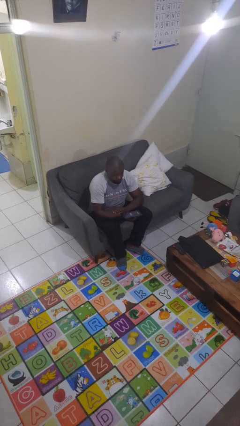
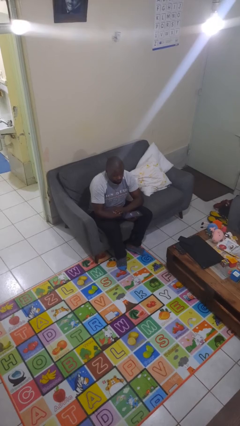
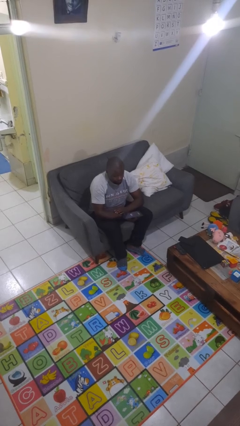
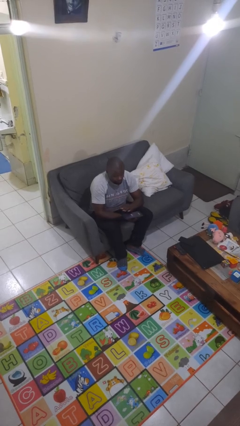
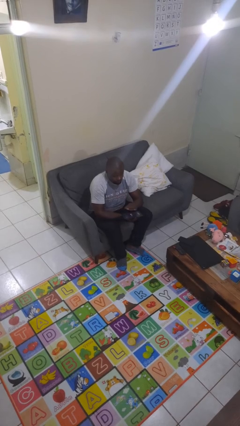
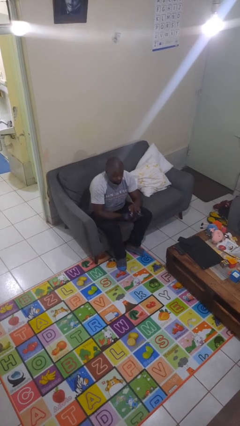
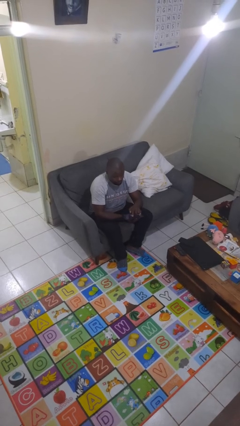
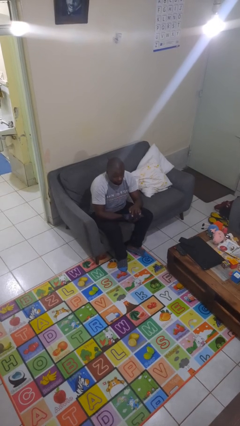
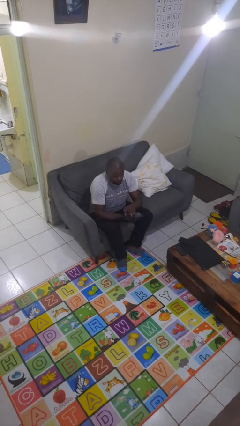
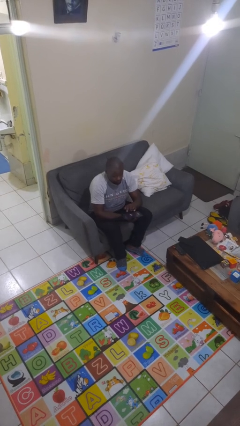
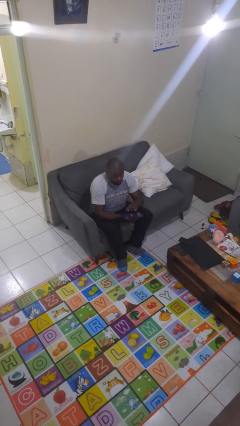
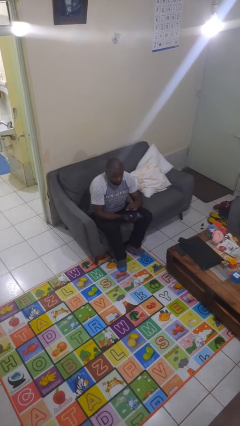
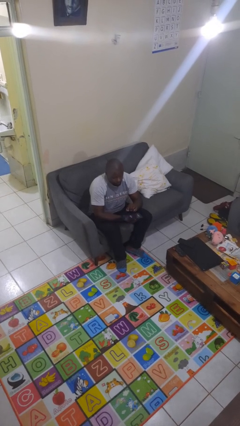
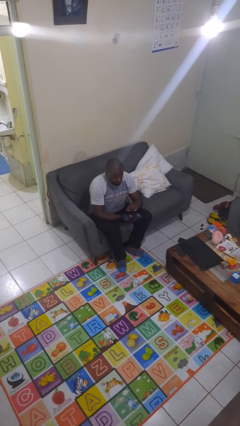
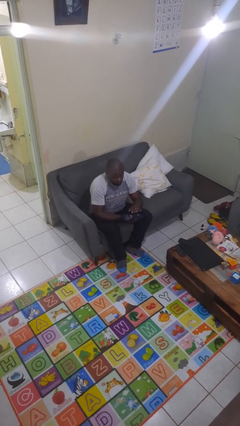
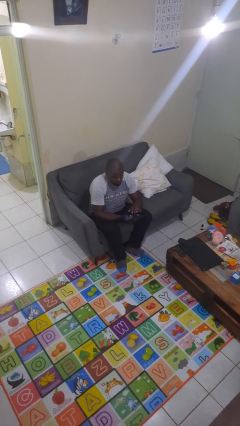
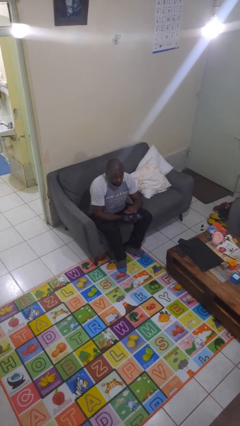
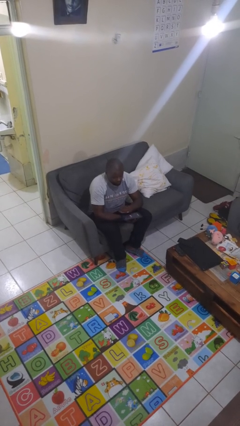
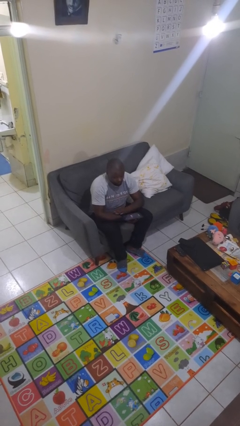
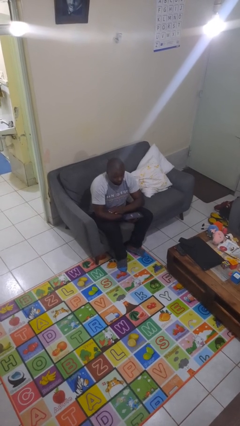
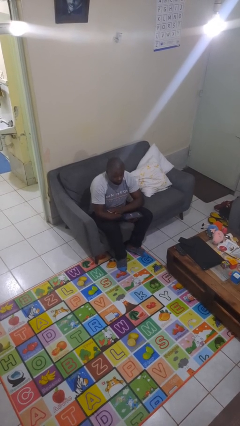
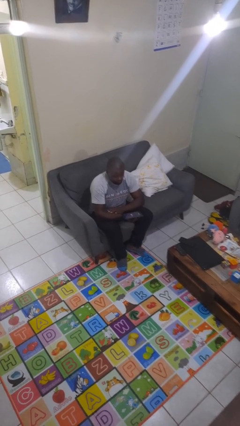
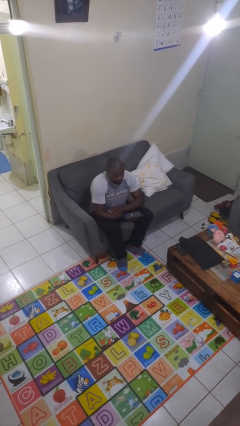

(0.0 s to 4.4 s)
person interacts with tablet

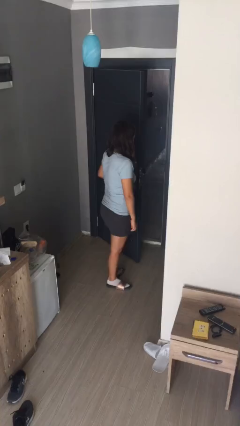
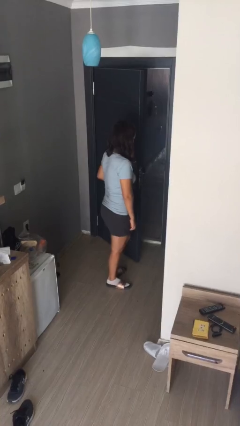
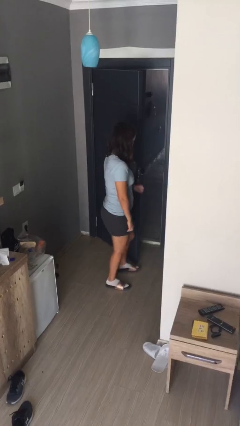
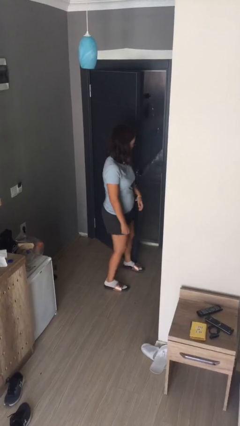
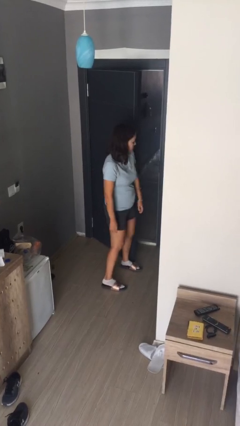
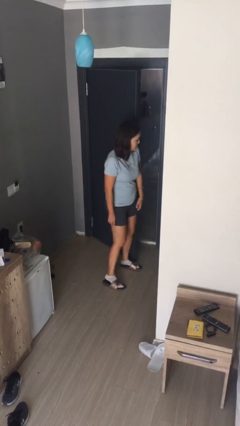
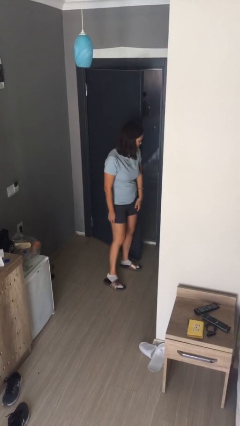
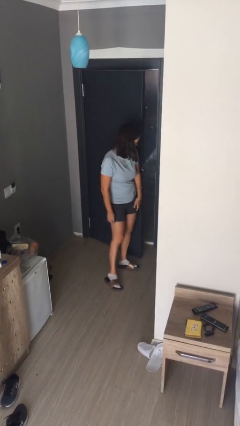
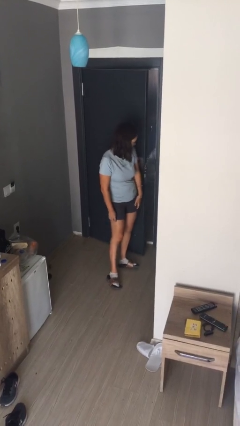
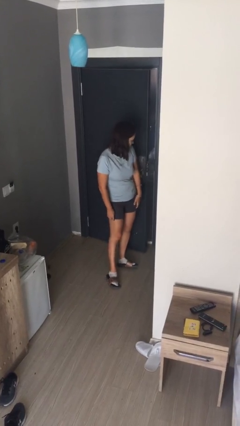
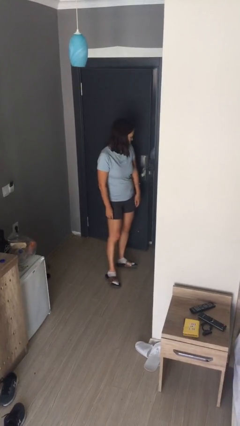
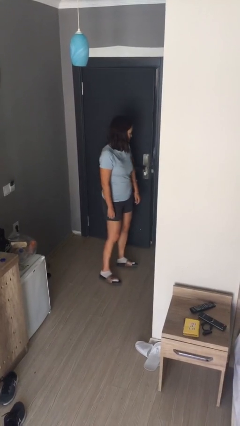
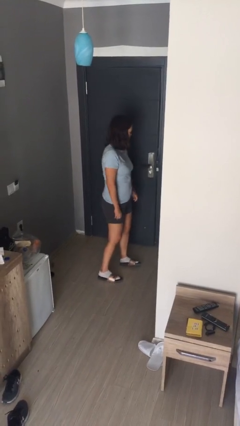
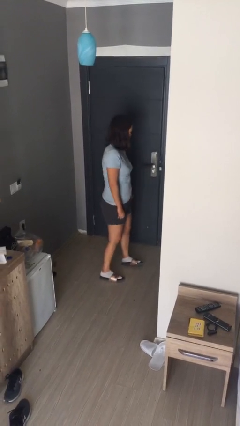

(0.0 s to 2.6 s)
person closes door with hip

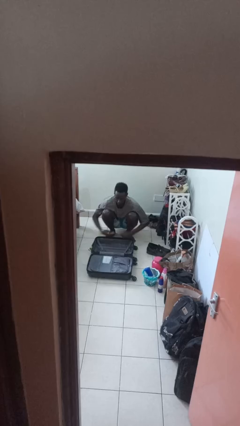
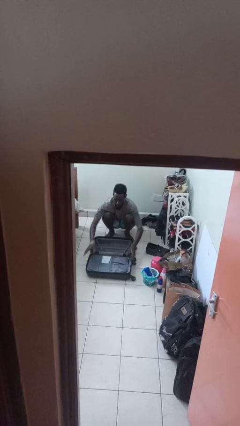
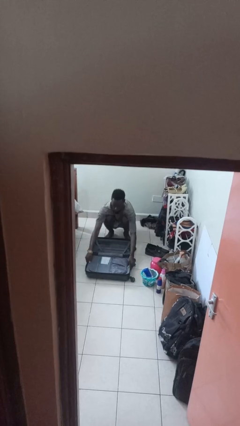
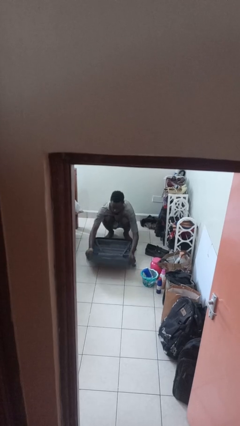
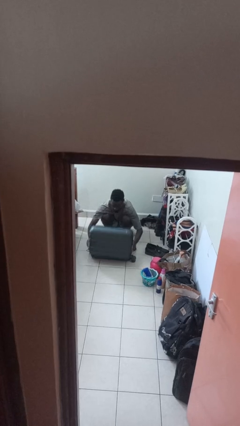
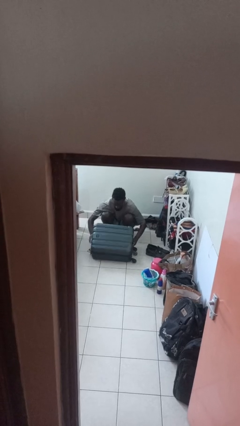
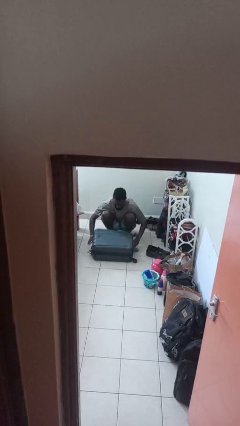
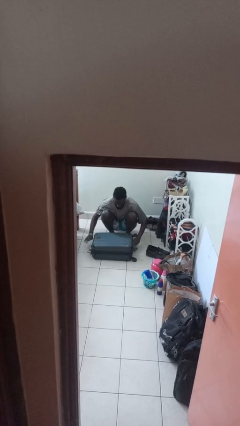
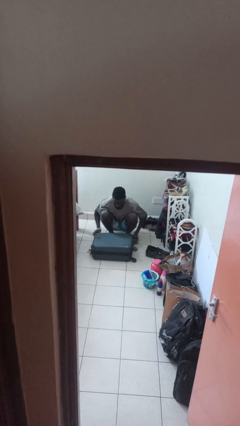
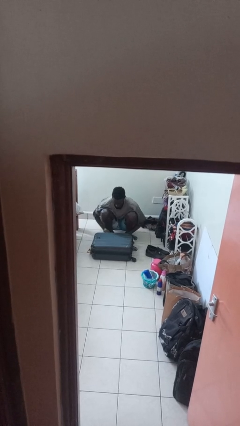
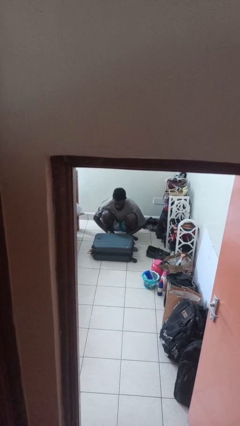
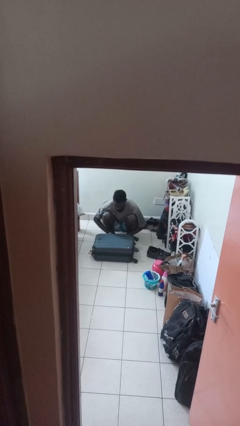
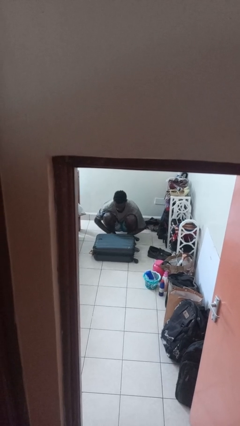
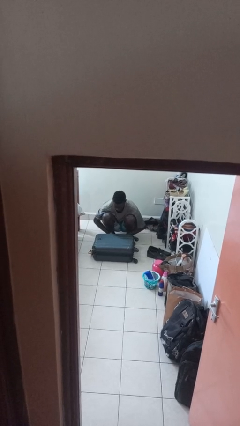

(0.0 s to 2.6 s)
person closes suitcase

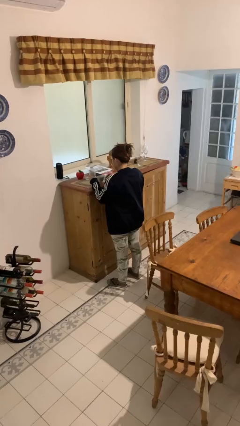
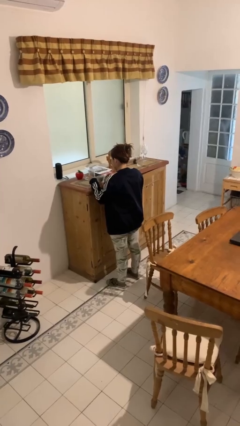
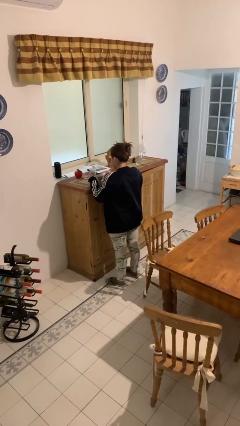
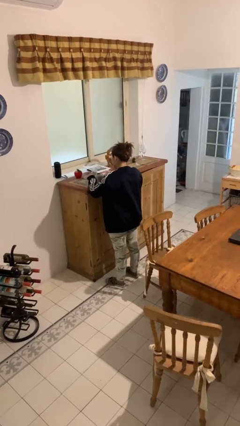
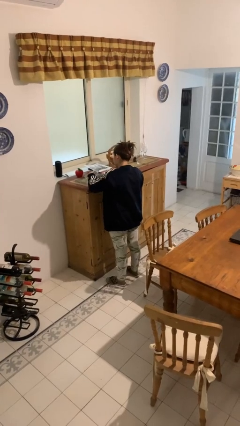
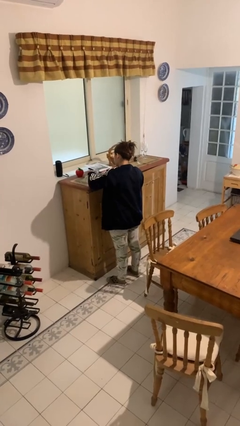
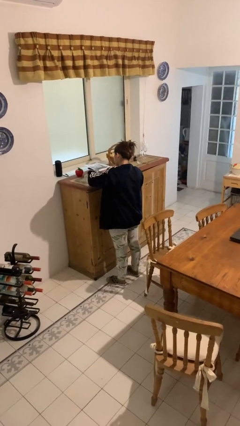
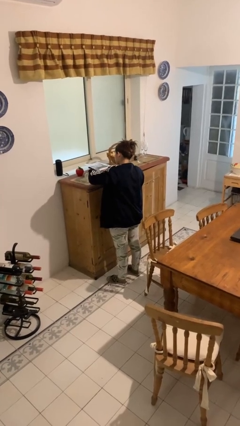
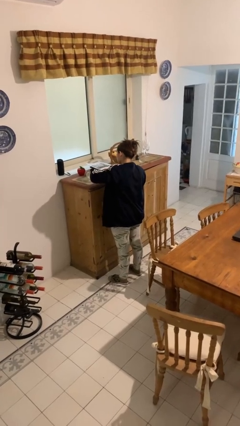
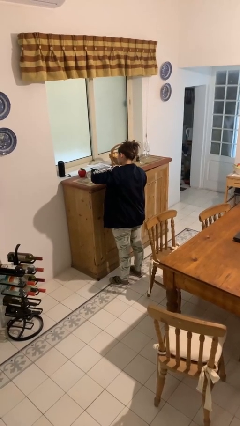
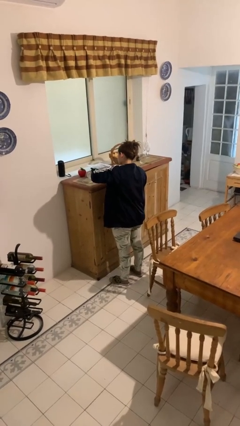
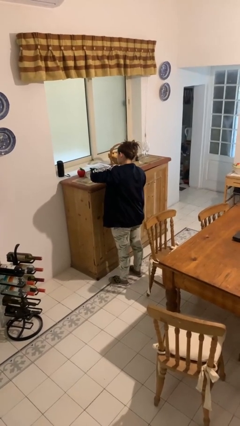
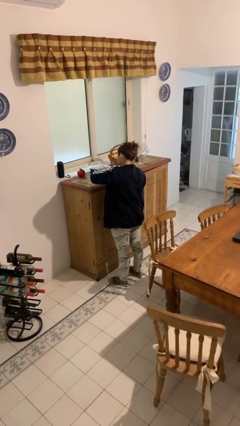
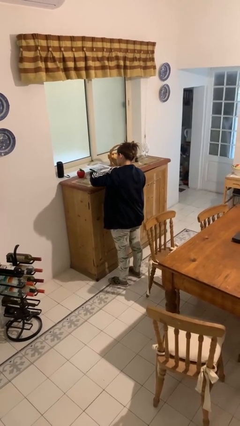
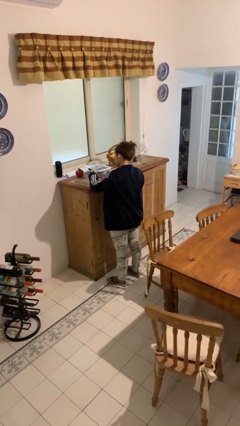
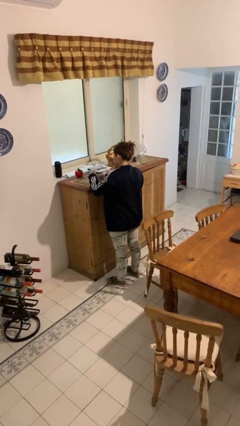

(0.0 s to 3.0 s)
person pours liquid into cup

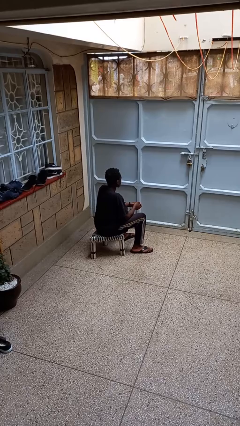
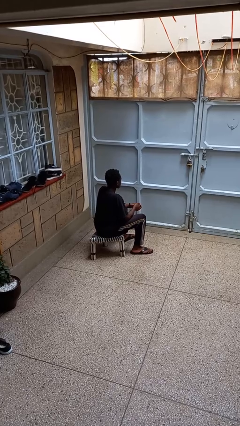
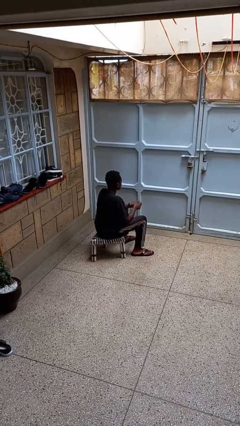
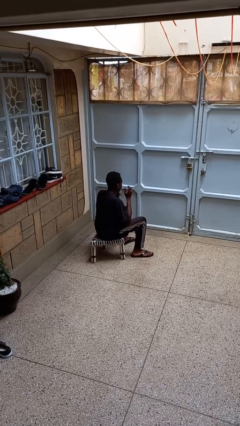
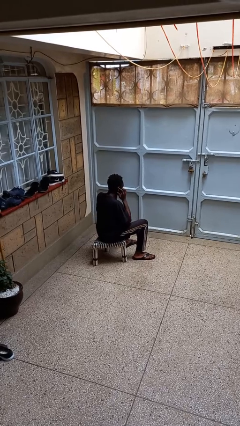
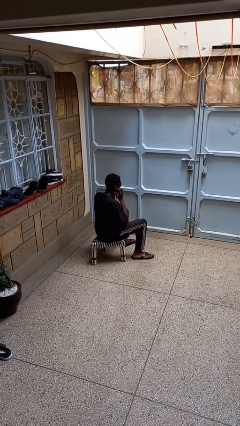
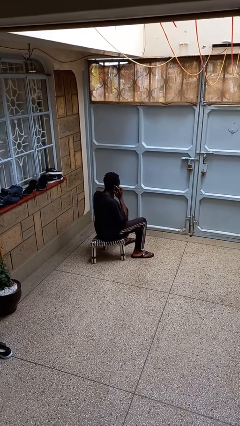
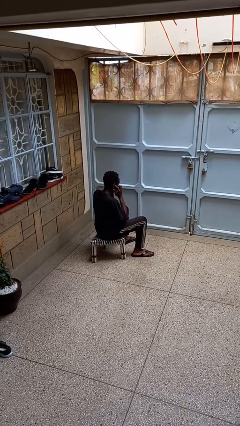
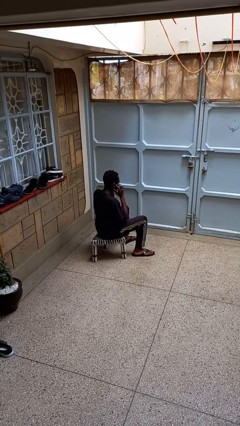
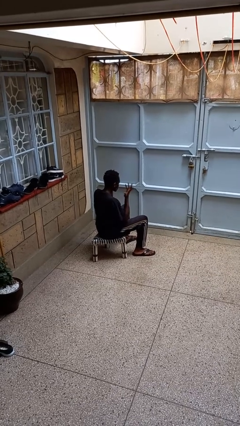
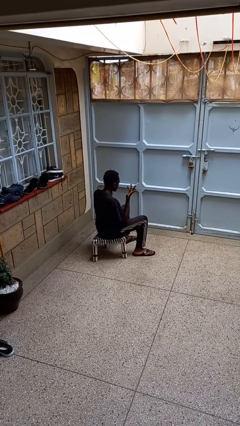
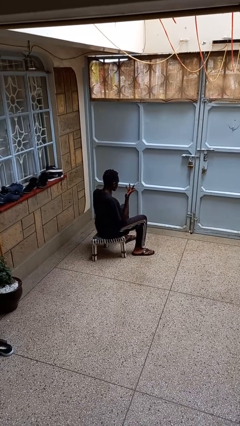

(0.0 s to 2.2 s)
person puts fingers in ear

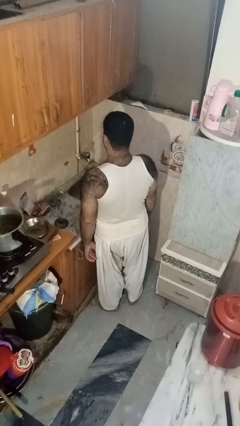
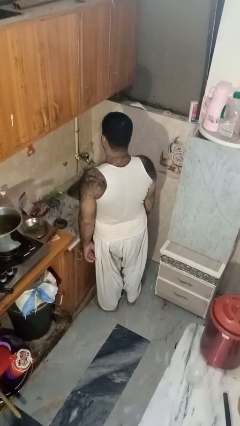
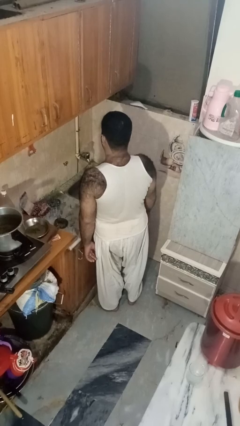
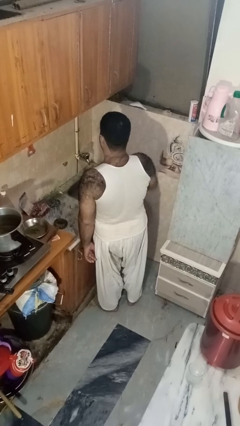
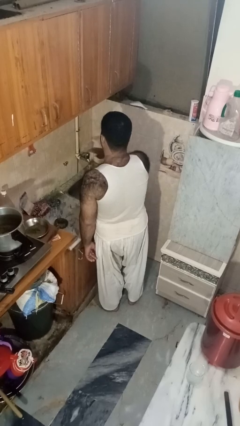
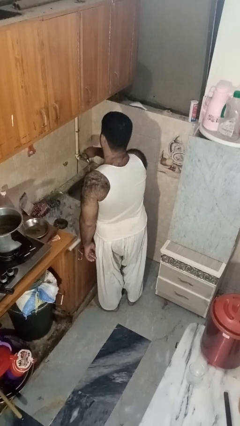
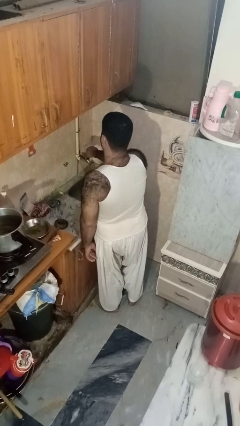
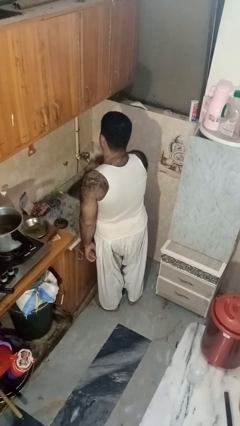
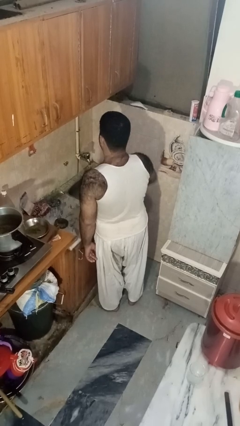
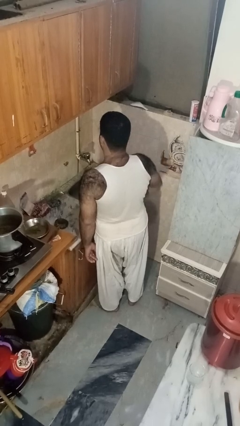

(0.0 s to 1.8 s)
person turns off faucet

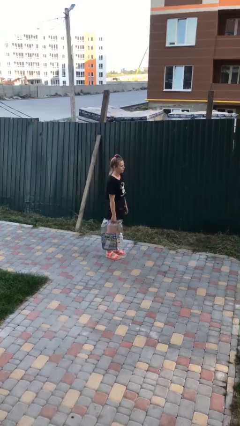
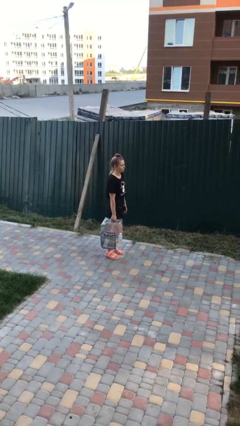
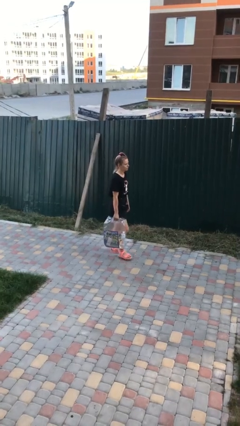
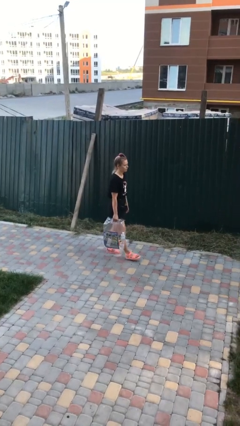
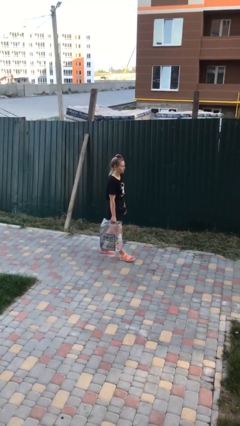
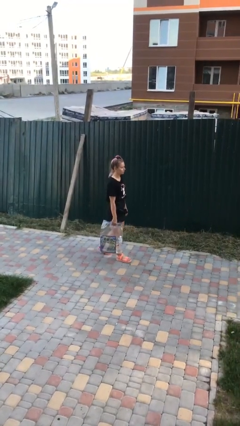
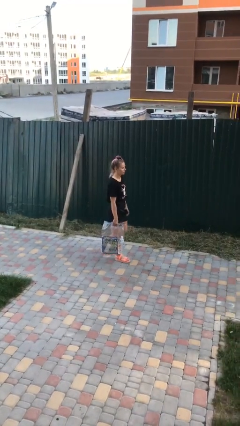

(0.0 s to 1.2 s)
person carries groceries
